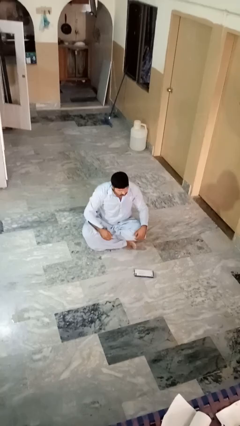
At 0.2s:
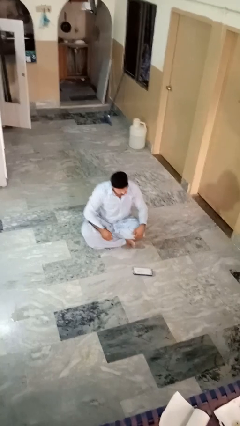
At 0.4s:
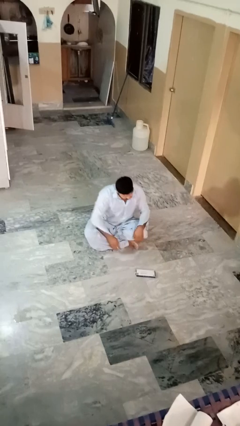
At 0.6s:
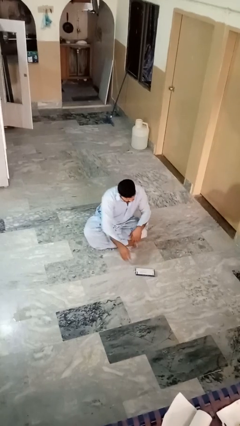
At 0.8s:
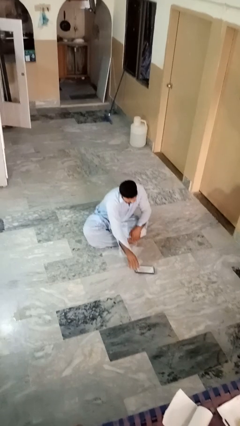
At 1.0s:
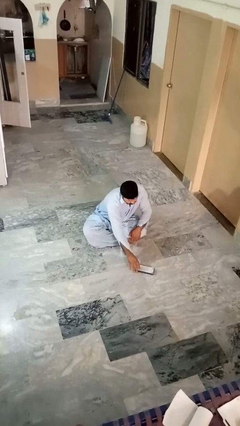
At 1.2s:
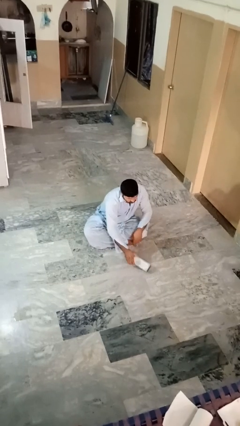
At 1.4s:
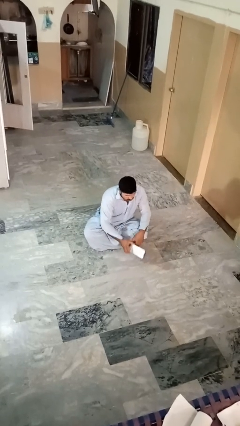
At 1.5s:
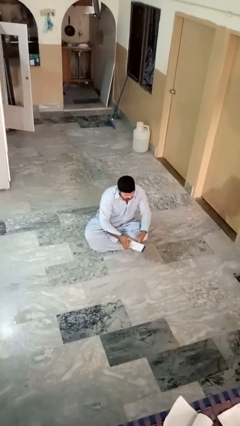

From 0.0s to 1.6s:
person picks up object from floor

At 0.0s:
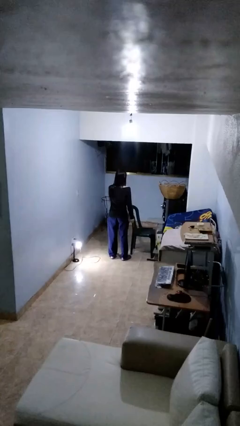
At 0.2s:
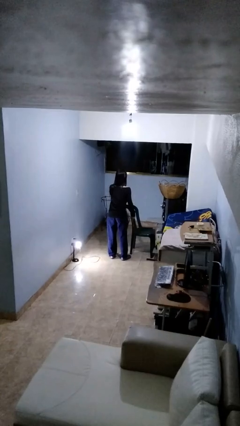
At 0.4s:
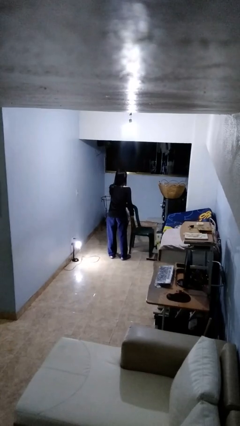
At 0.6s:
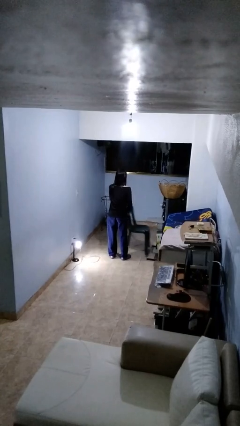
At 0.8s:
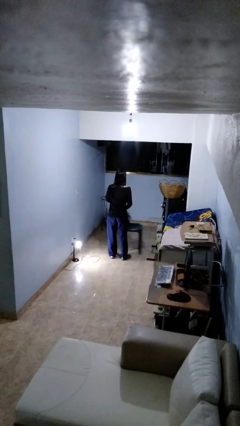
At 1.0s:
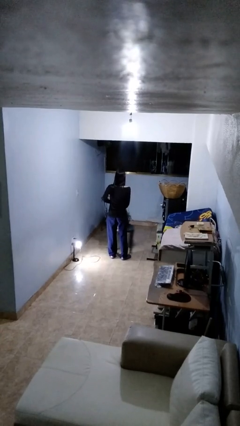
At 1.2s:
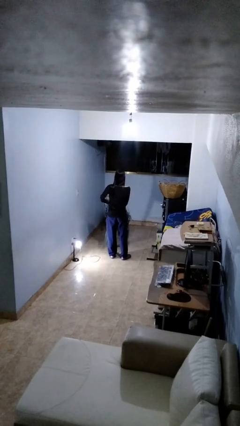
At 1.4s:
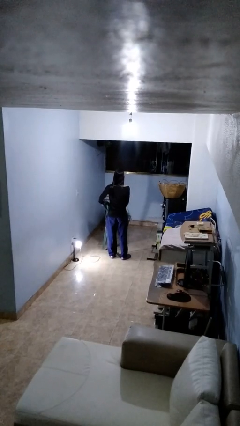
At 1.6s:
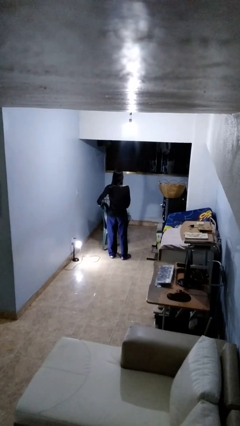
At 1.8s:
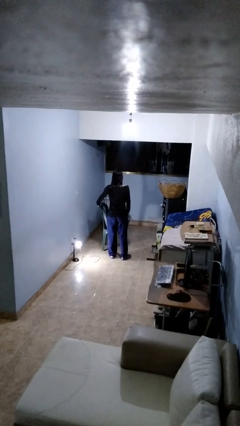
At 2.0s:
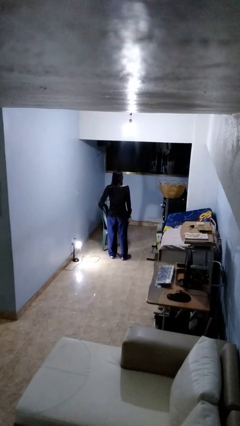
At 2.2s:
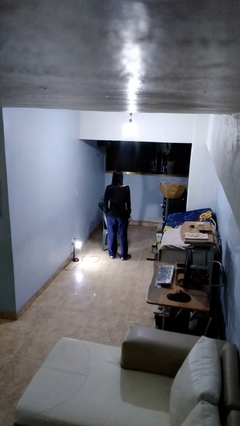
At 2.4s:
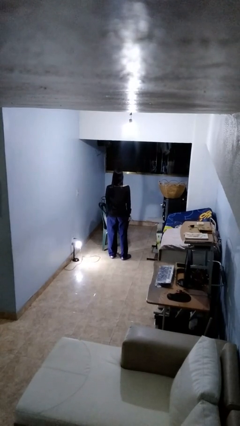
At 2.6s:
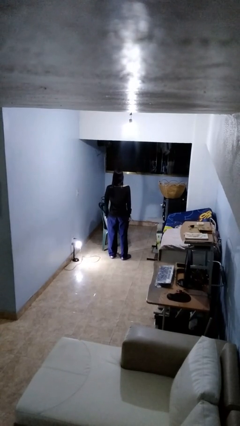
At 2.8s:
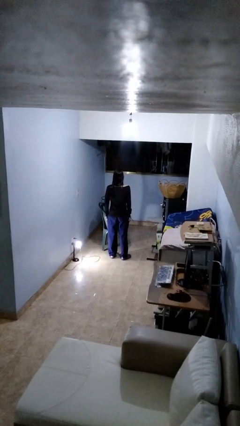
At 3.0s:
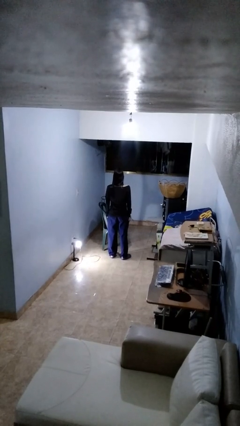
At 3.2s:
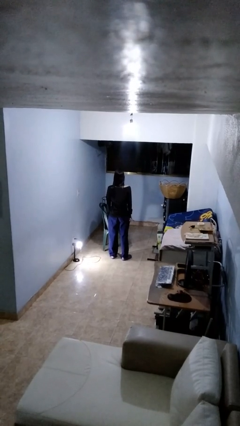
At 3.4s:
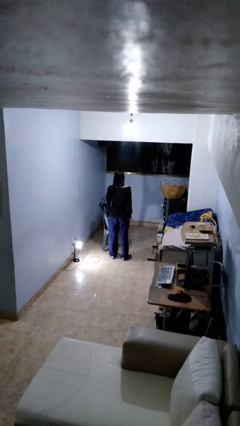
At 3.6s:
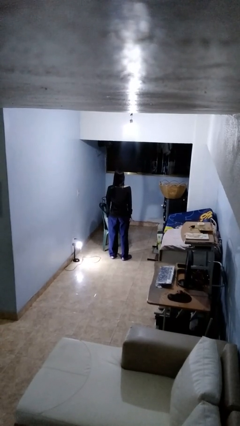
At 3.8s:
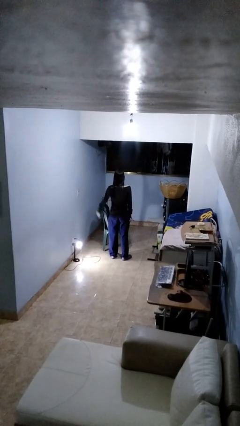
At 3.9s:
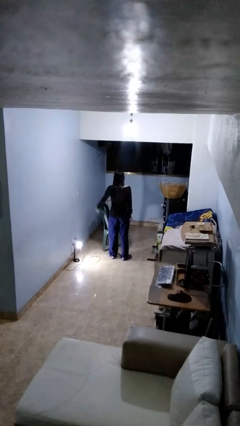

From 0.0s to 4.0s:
person pulls out chair

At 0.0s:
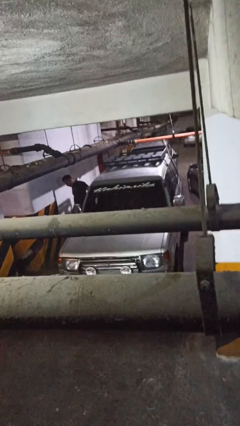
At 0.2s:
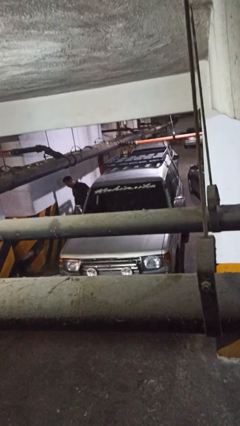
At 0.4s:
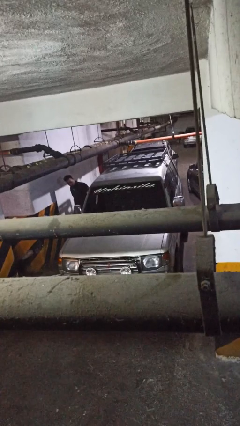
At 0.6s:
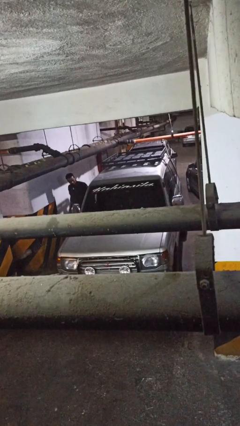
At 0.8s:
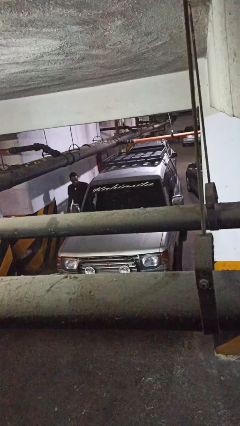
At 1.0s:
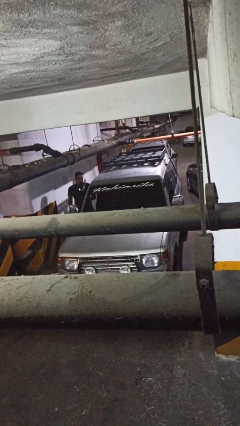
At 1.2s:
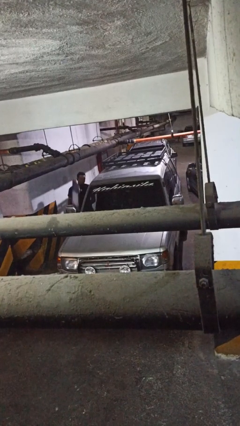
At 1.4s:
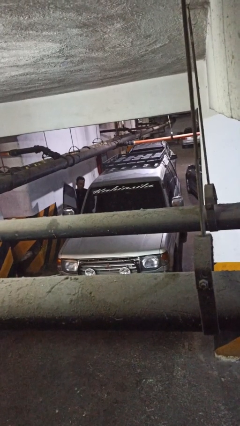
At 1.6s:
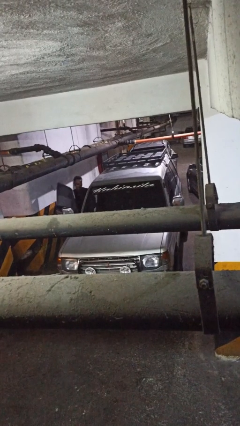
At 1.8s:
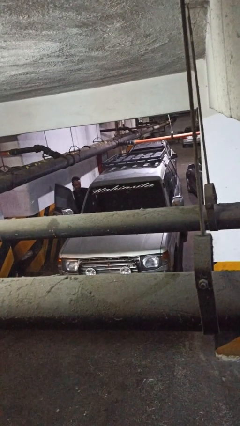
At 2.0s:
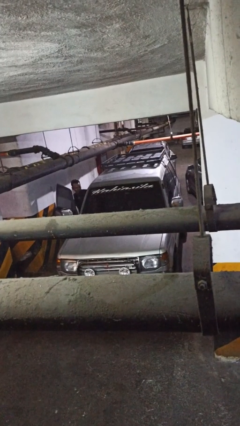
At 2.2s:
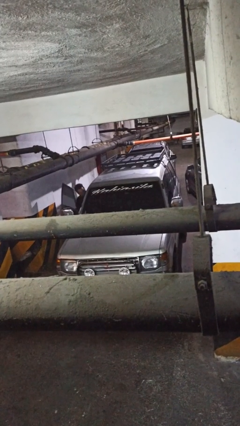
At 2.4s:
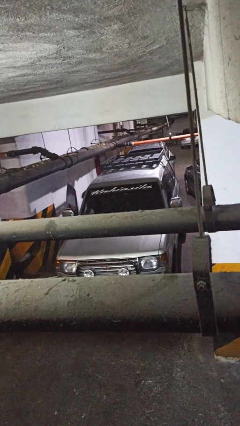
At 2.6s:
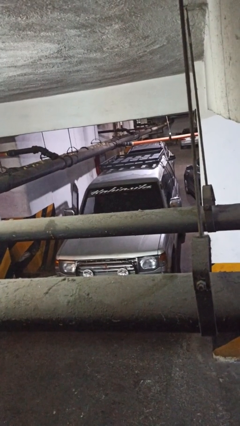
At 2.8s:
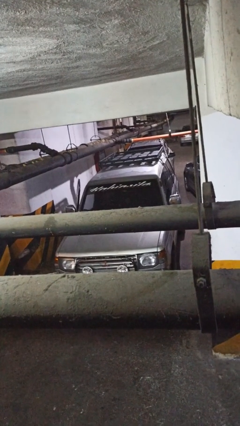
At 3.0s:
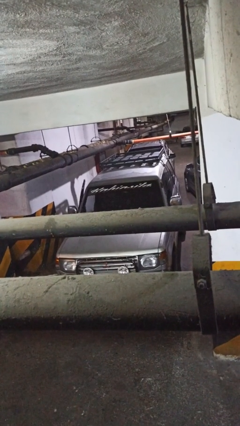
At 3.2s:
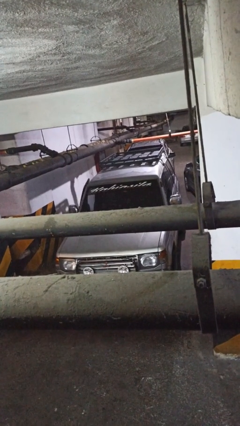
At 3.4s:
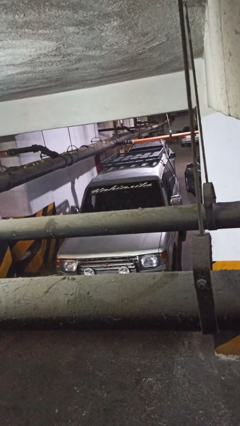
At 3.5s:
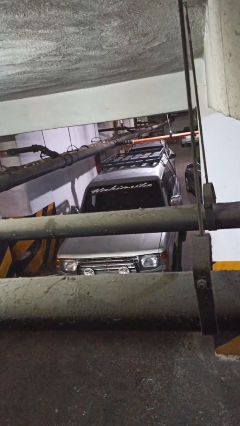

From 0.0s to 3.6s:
car picks up person

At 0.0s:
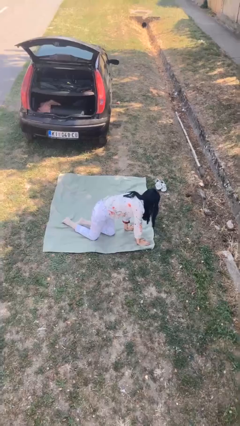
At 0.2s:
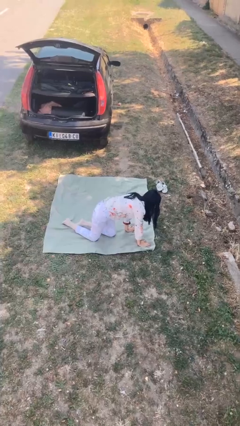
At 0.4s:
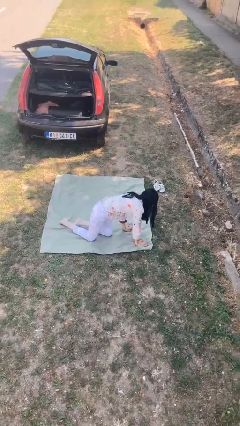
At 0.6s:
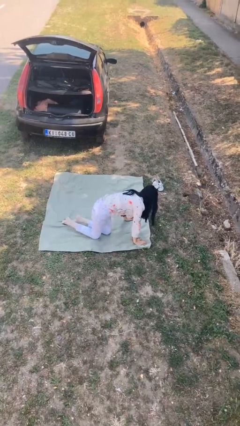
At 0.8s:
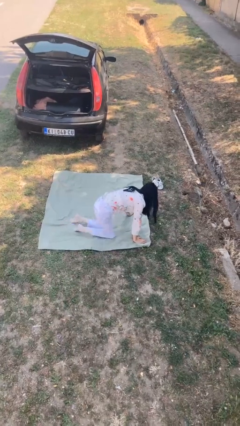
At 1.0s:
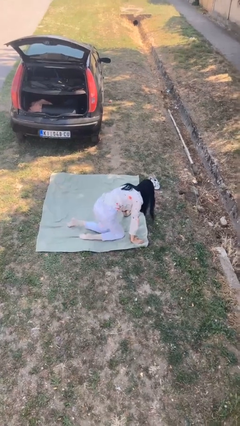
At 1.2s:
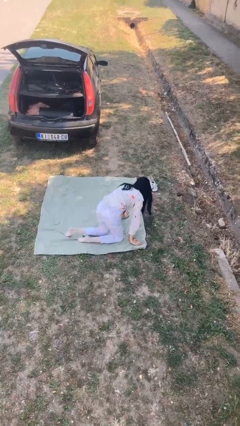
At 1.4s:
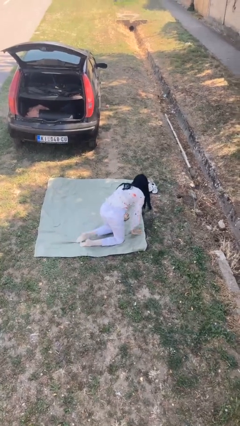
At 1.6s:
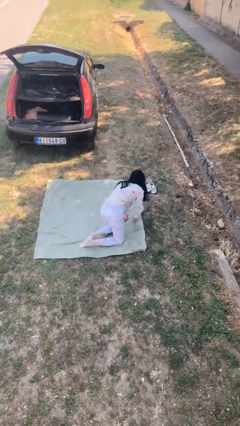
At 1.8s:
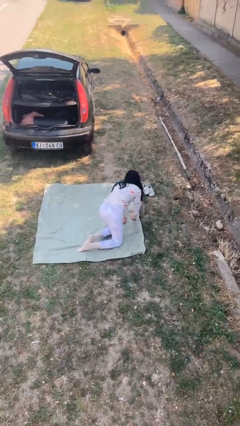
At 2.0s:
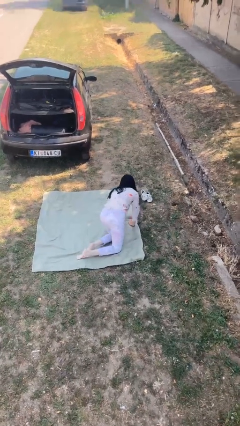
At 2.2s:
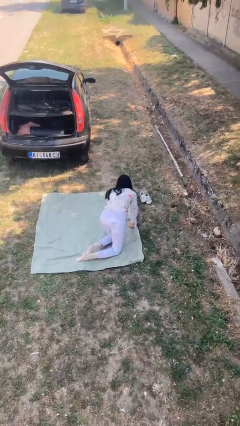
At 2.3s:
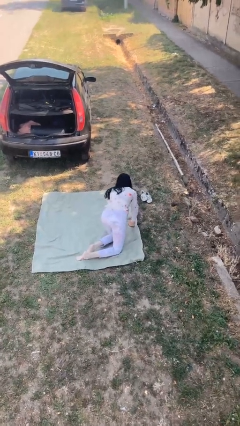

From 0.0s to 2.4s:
person crawls

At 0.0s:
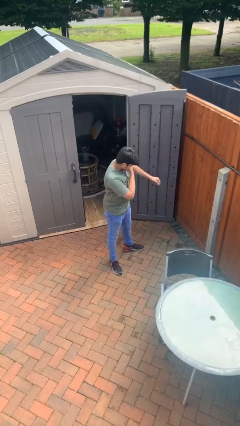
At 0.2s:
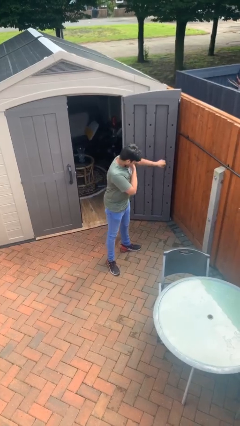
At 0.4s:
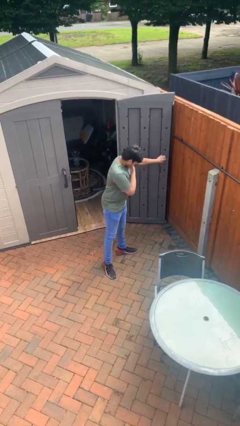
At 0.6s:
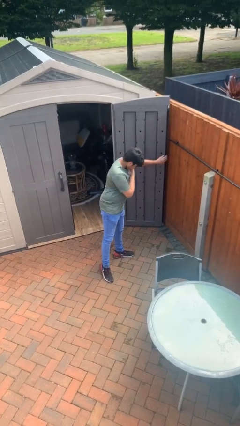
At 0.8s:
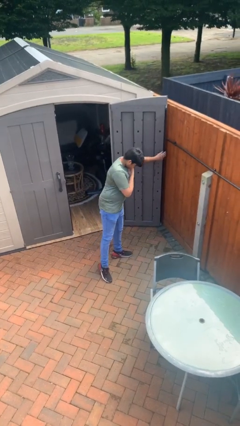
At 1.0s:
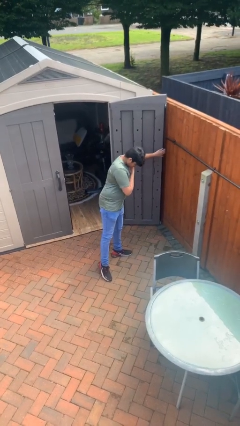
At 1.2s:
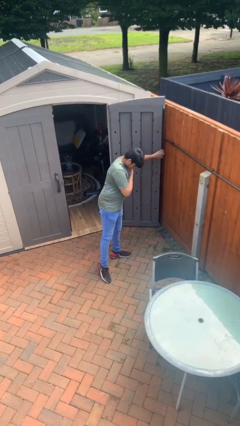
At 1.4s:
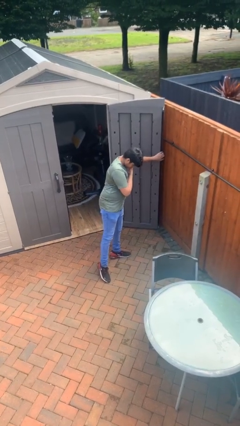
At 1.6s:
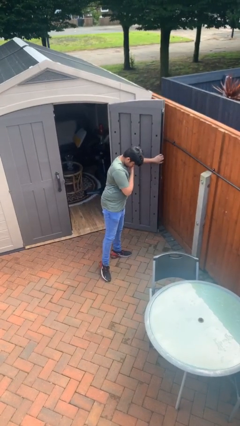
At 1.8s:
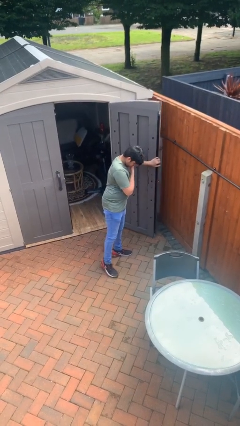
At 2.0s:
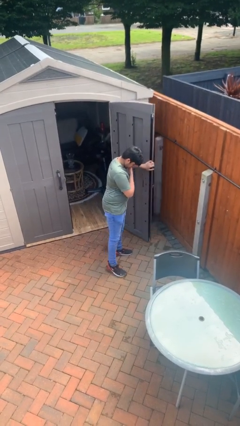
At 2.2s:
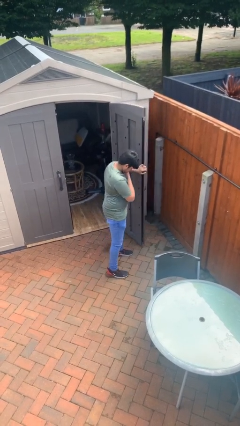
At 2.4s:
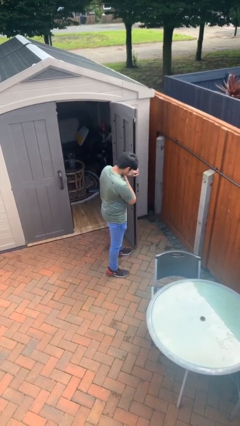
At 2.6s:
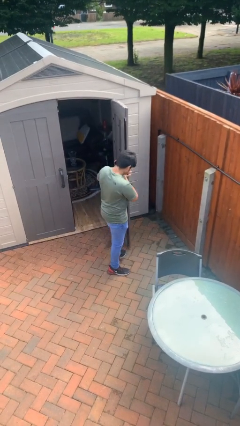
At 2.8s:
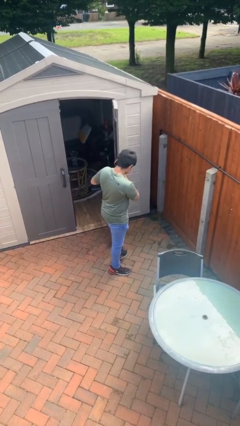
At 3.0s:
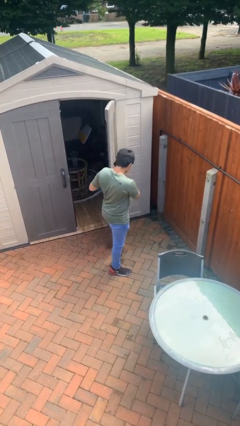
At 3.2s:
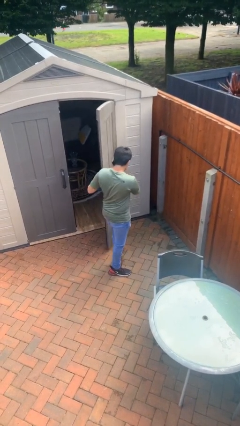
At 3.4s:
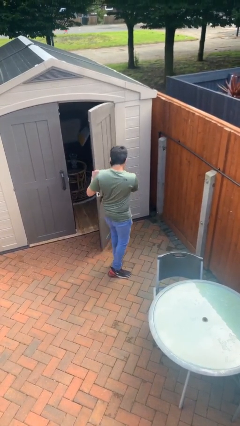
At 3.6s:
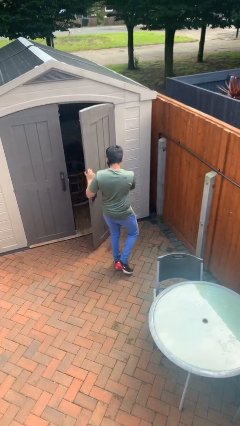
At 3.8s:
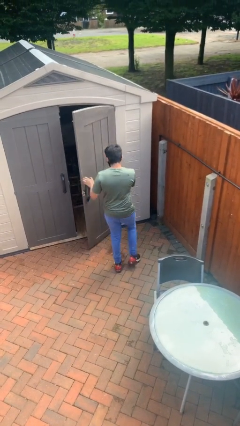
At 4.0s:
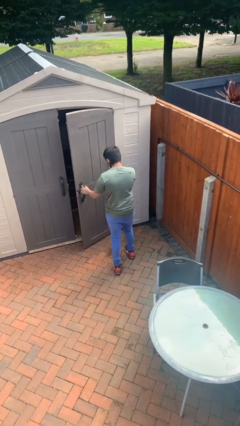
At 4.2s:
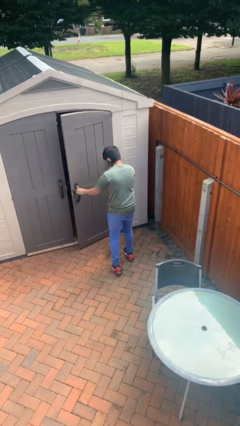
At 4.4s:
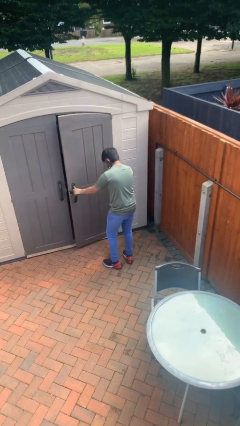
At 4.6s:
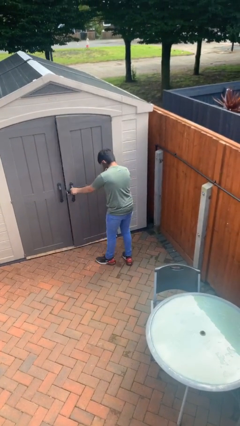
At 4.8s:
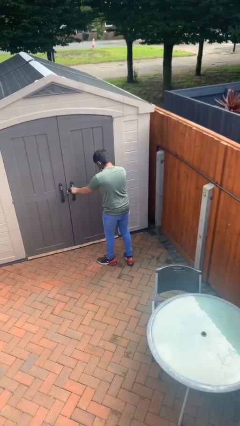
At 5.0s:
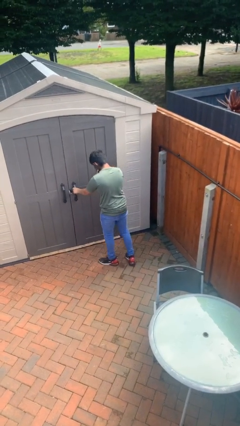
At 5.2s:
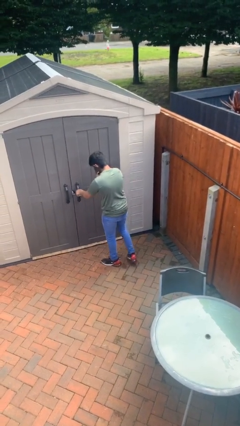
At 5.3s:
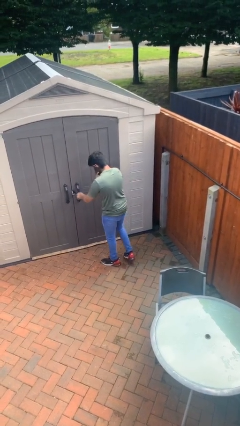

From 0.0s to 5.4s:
person closes facility door

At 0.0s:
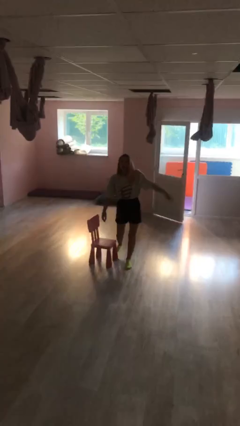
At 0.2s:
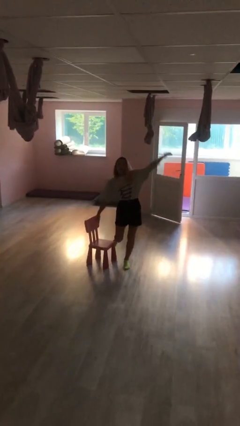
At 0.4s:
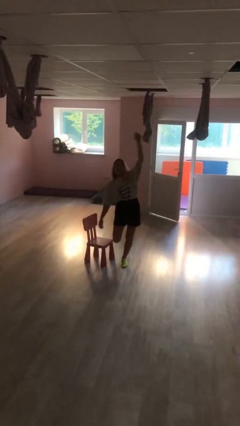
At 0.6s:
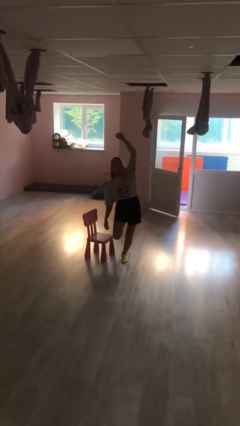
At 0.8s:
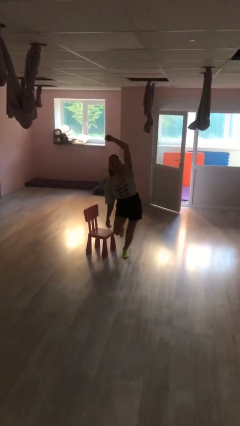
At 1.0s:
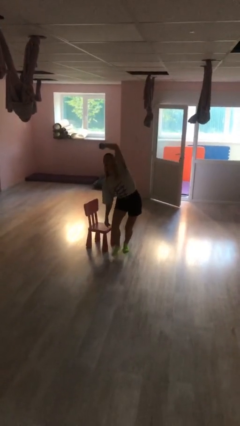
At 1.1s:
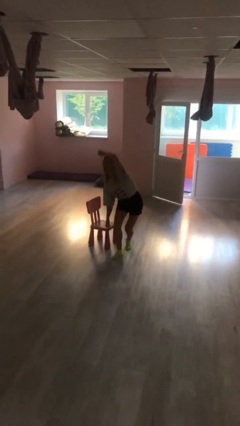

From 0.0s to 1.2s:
person trips on object on floor
